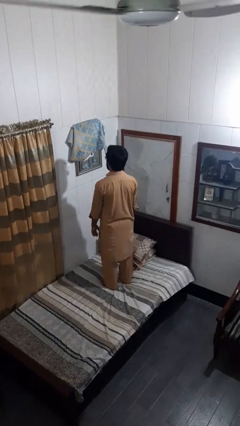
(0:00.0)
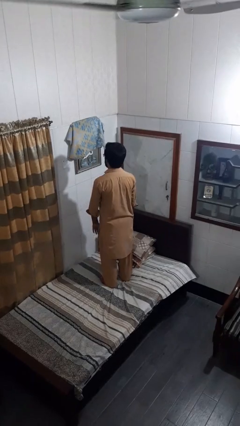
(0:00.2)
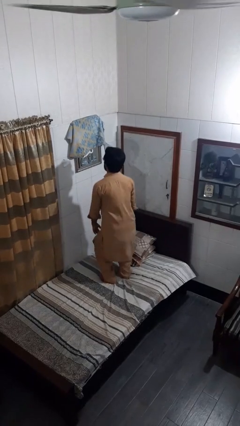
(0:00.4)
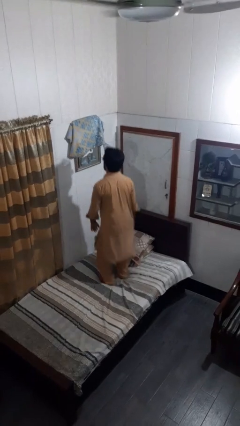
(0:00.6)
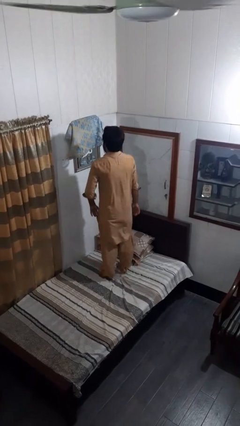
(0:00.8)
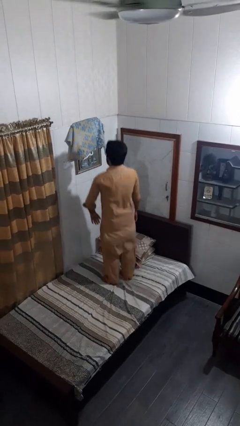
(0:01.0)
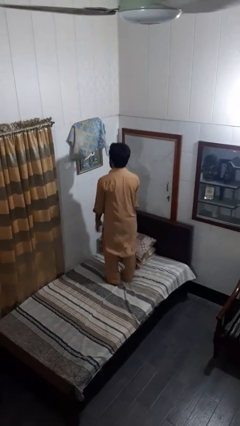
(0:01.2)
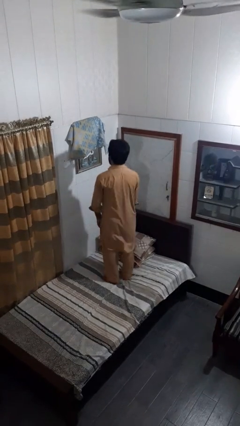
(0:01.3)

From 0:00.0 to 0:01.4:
person jumps on bed

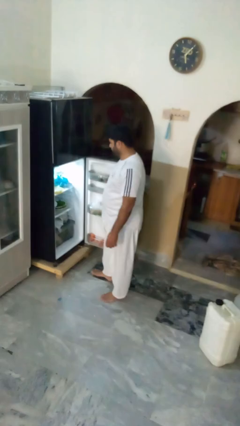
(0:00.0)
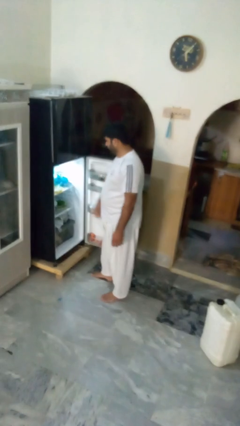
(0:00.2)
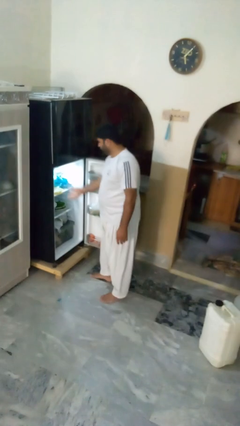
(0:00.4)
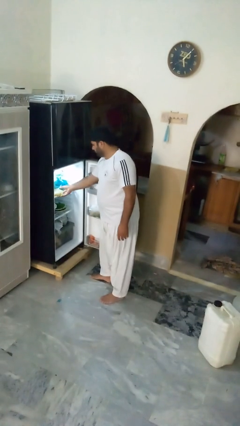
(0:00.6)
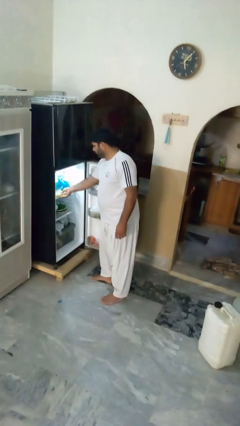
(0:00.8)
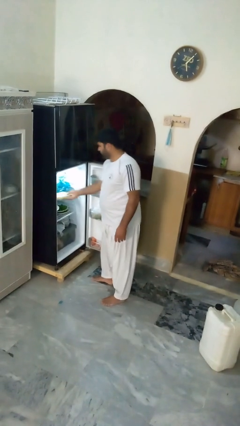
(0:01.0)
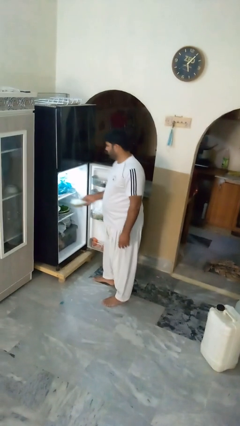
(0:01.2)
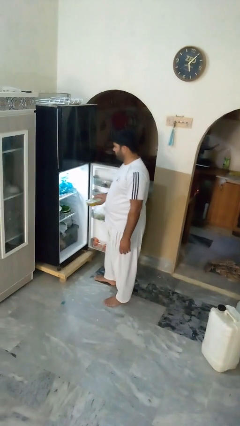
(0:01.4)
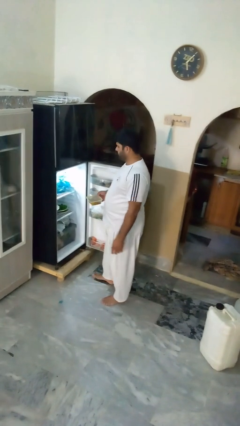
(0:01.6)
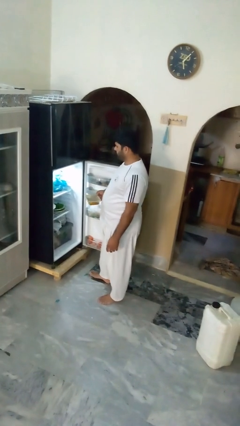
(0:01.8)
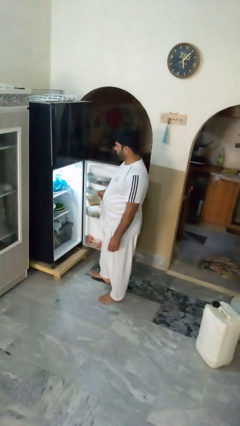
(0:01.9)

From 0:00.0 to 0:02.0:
person takes object from refrigerator

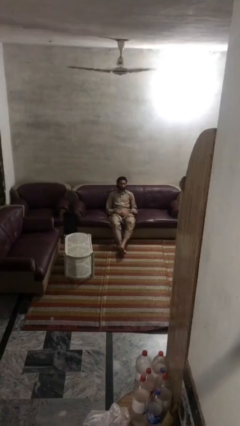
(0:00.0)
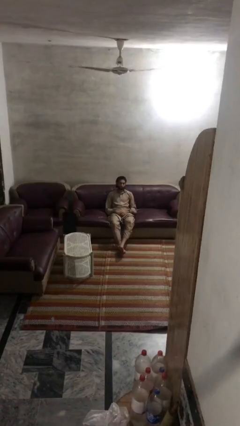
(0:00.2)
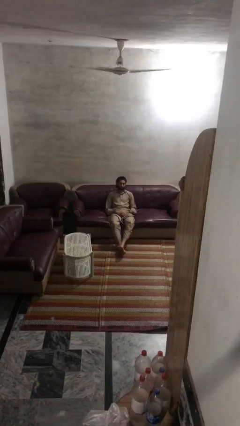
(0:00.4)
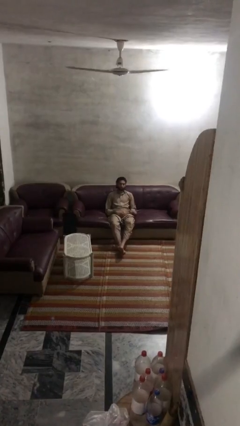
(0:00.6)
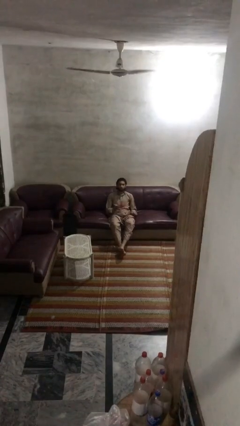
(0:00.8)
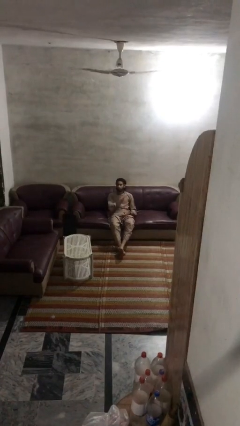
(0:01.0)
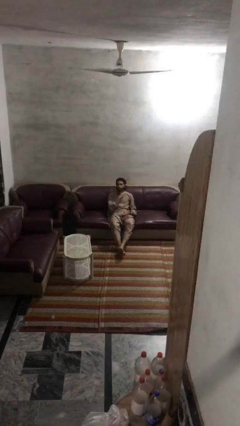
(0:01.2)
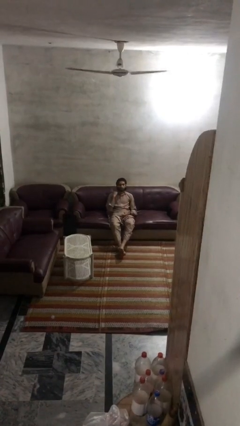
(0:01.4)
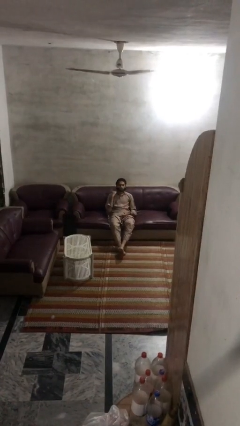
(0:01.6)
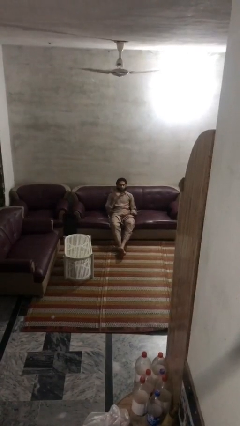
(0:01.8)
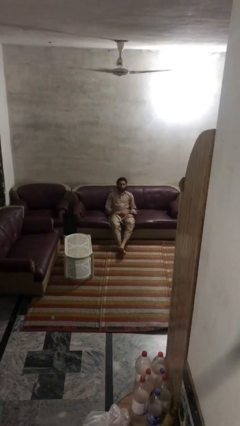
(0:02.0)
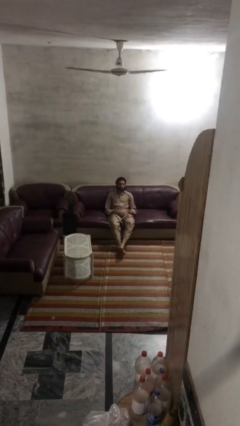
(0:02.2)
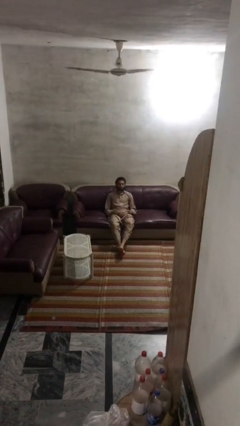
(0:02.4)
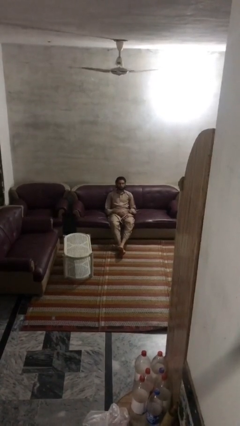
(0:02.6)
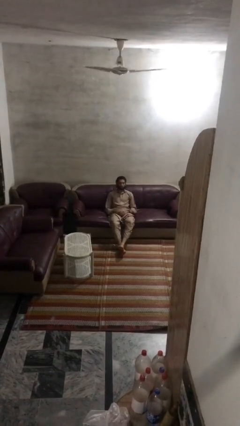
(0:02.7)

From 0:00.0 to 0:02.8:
person gestures cut

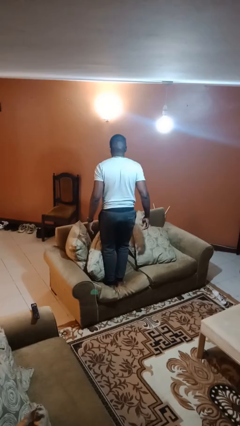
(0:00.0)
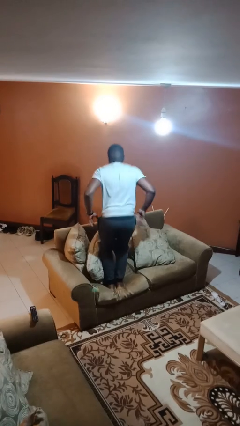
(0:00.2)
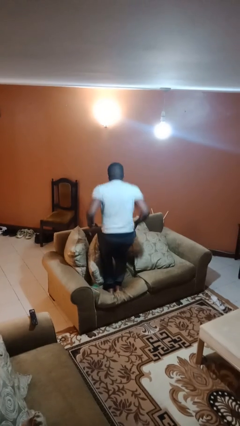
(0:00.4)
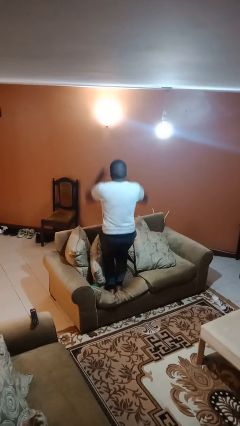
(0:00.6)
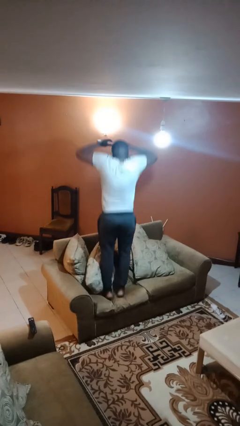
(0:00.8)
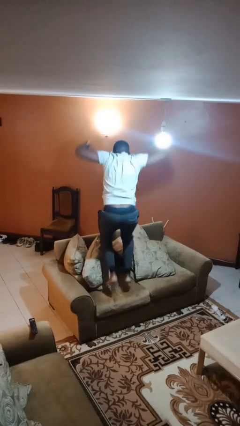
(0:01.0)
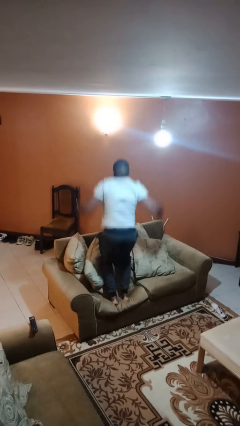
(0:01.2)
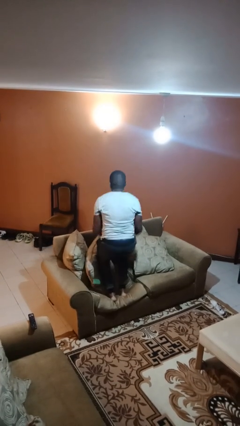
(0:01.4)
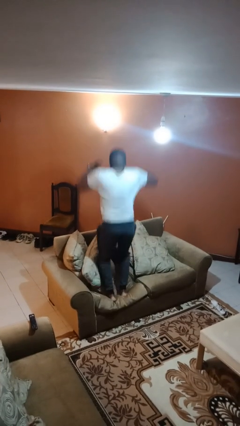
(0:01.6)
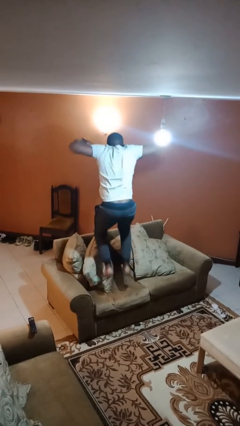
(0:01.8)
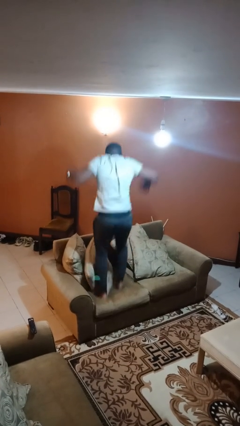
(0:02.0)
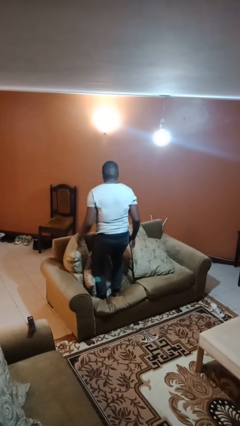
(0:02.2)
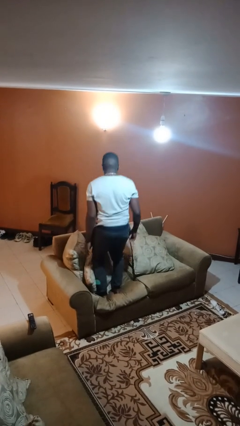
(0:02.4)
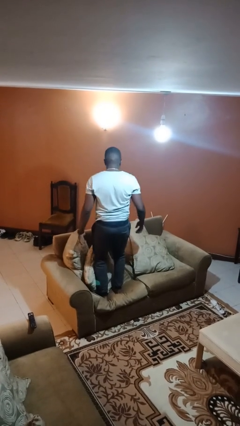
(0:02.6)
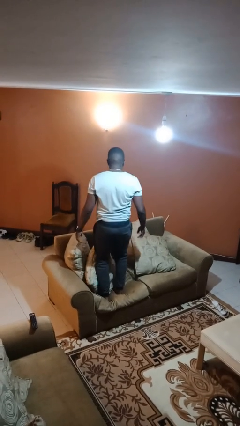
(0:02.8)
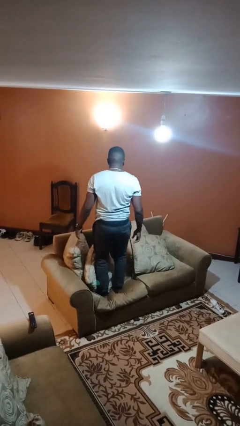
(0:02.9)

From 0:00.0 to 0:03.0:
person jumps on couch

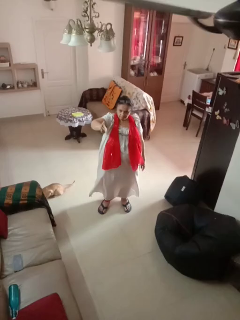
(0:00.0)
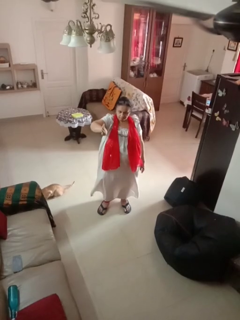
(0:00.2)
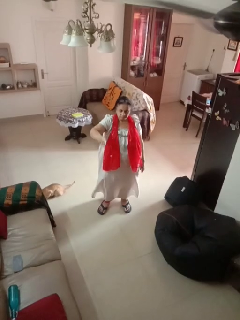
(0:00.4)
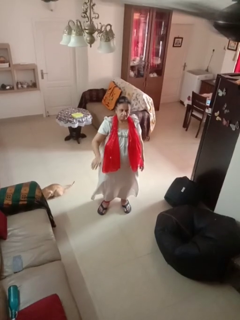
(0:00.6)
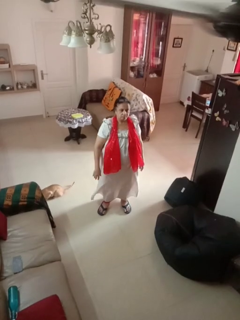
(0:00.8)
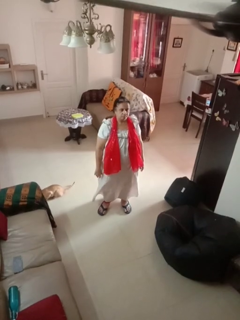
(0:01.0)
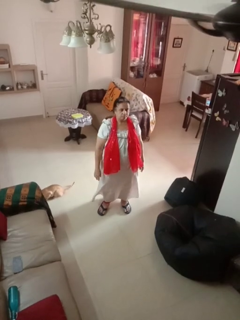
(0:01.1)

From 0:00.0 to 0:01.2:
person gestures swipe right

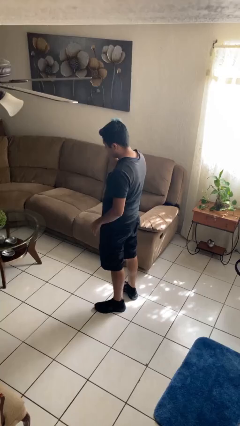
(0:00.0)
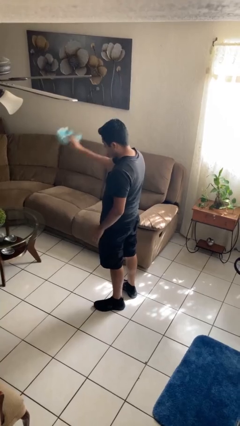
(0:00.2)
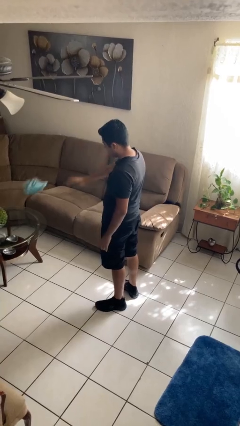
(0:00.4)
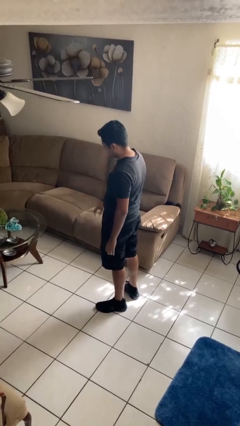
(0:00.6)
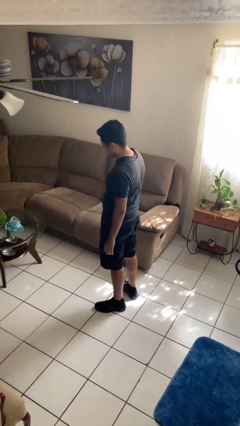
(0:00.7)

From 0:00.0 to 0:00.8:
person throws object on table

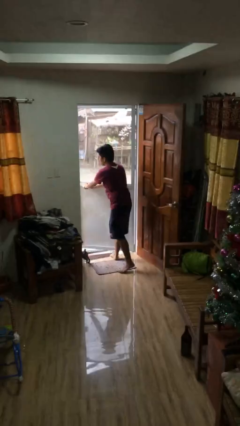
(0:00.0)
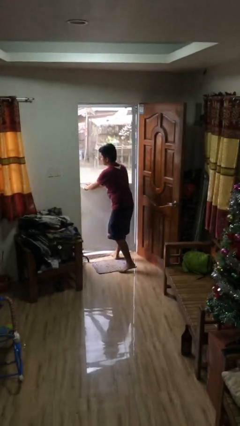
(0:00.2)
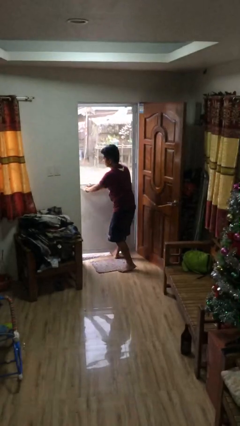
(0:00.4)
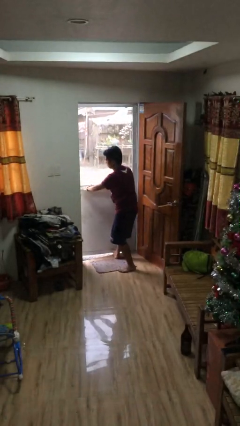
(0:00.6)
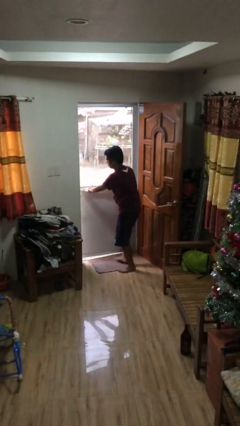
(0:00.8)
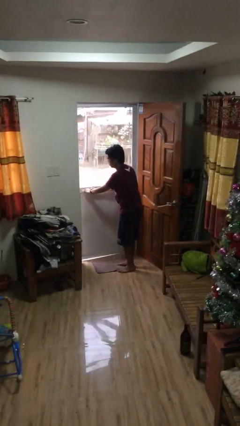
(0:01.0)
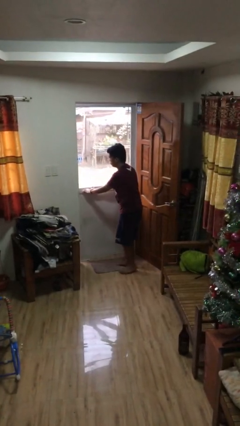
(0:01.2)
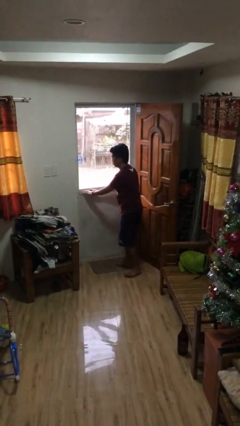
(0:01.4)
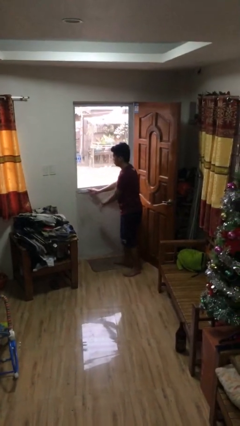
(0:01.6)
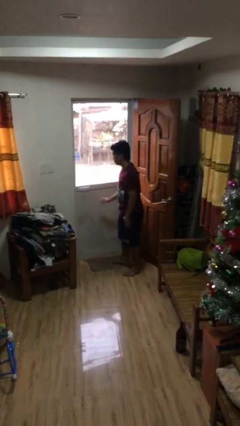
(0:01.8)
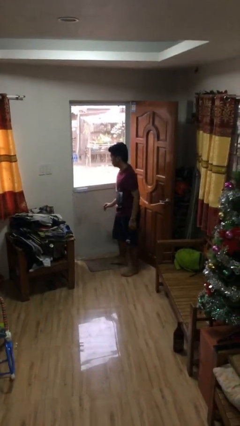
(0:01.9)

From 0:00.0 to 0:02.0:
person closes facility door

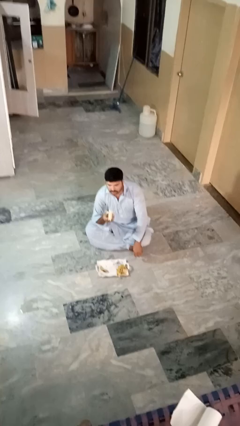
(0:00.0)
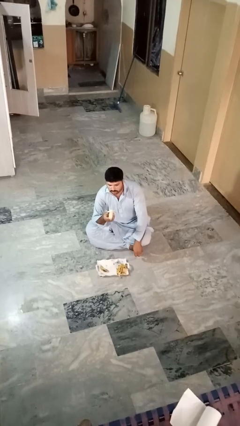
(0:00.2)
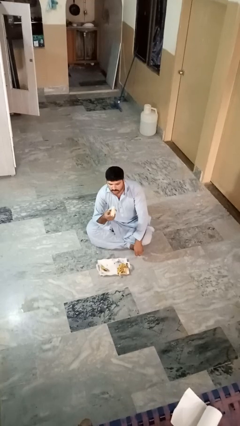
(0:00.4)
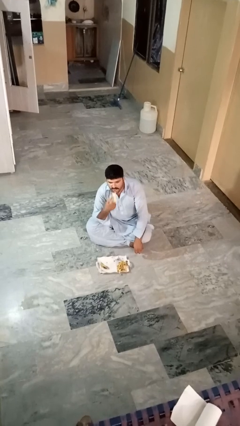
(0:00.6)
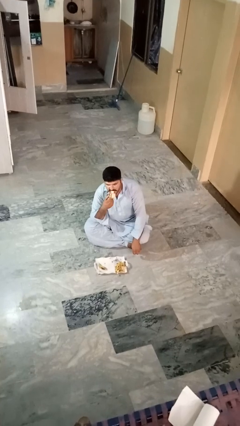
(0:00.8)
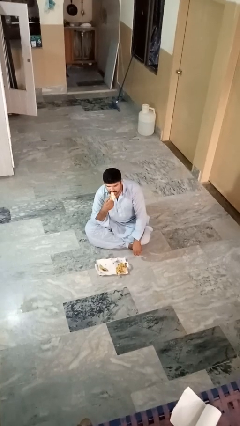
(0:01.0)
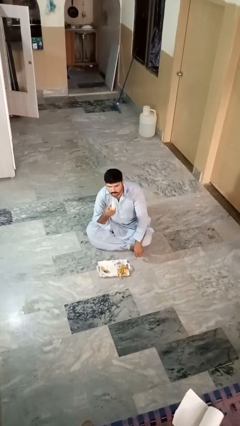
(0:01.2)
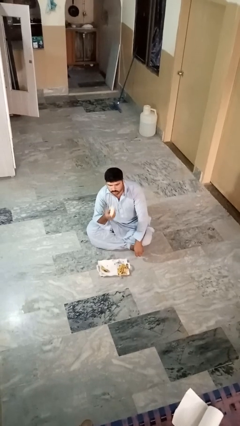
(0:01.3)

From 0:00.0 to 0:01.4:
person eats banana

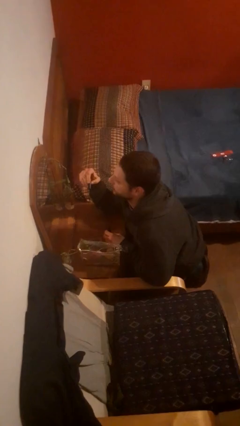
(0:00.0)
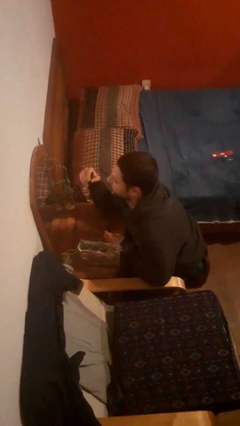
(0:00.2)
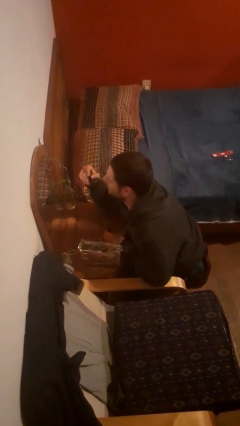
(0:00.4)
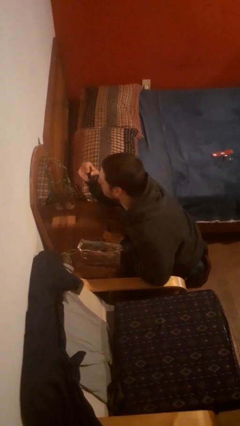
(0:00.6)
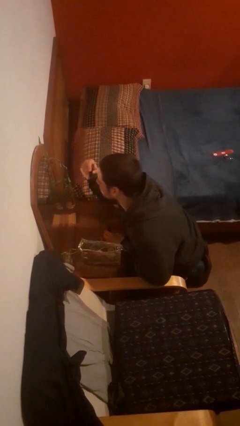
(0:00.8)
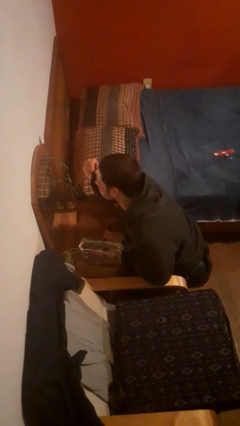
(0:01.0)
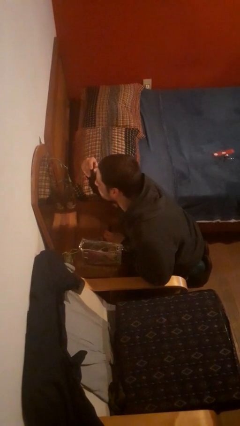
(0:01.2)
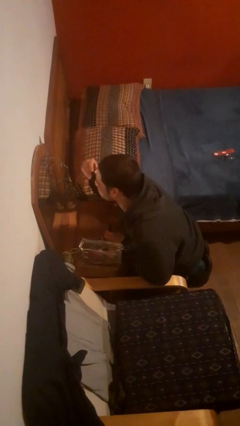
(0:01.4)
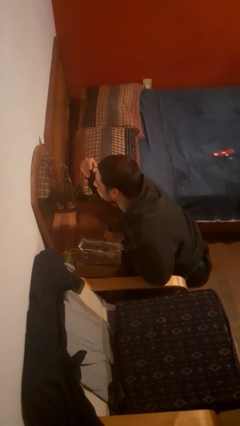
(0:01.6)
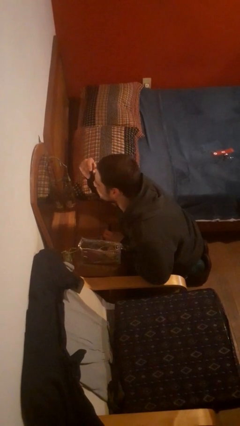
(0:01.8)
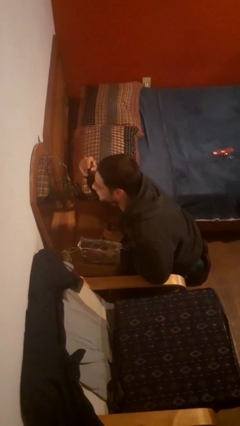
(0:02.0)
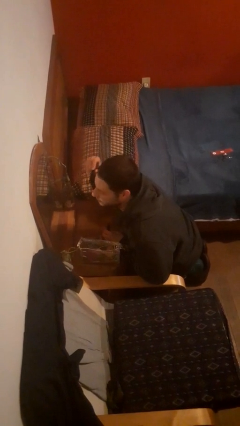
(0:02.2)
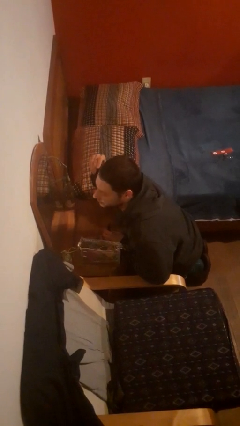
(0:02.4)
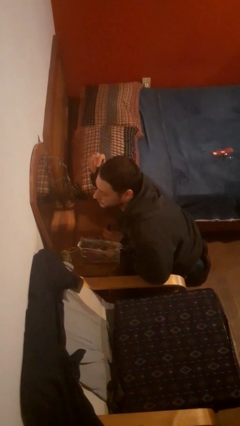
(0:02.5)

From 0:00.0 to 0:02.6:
person applies eye makeup
